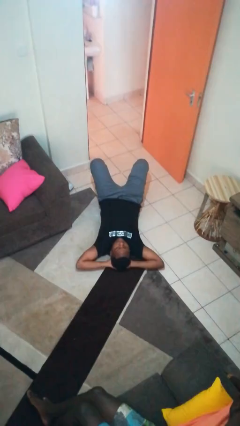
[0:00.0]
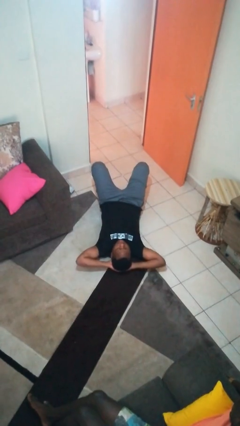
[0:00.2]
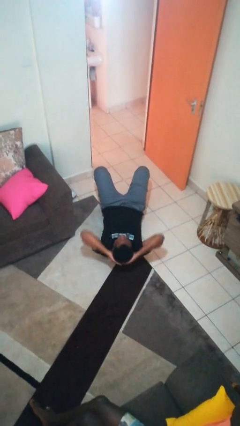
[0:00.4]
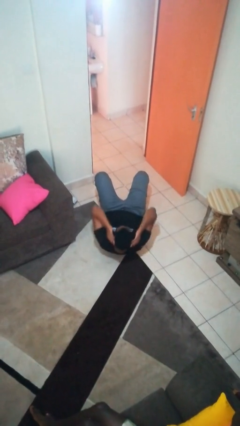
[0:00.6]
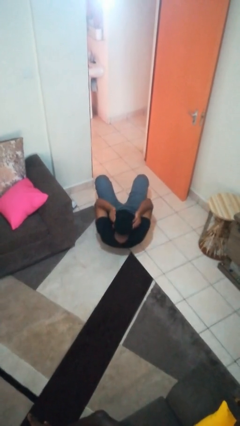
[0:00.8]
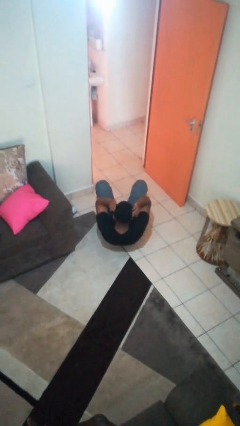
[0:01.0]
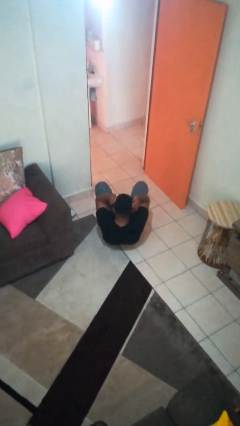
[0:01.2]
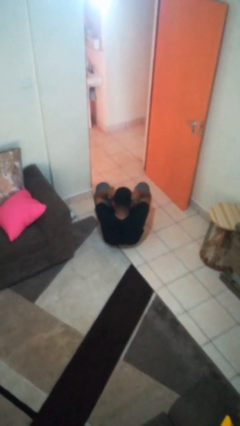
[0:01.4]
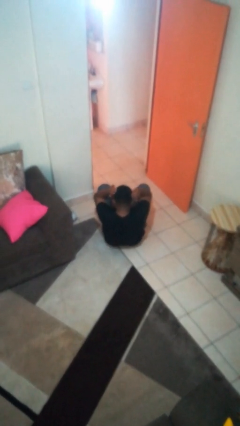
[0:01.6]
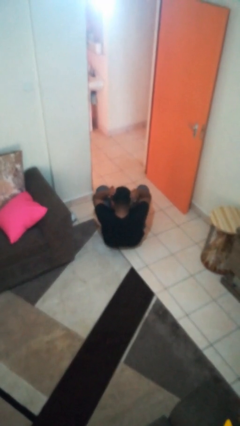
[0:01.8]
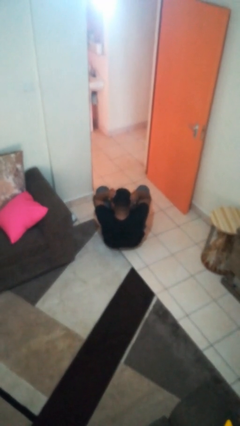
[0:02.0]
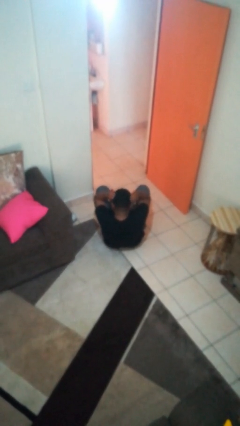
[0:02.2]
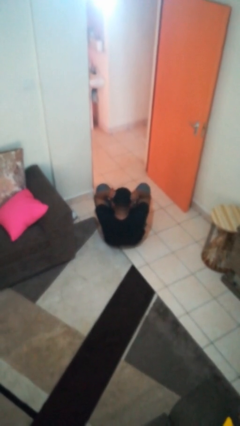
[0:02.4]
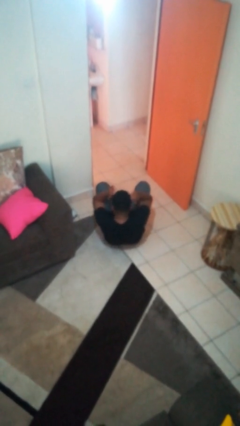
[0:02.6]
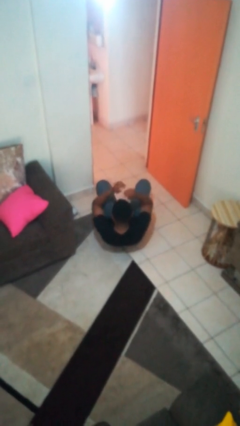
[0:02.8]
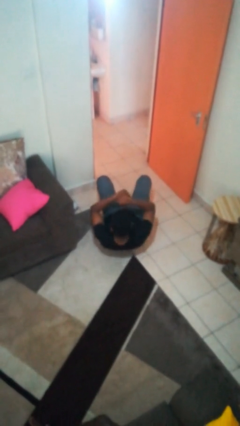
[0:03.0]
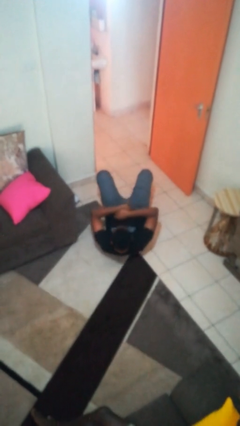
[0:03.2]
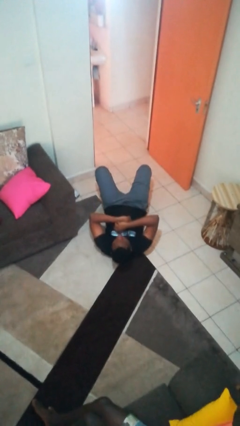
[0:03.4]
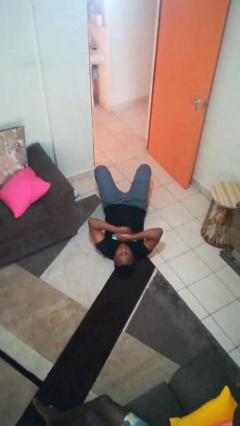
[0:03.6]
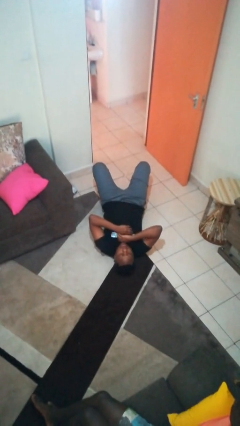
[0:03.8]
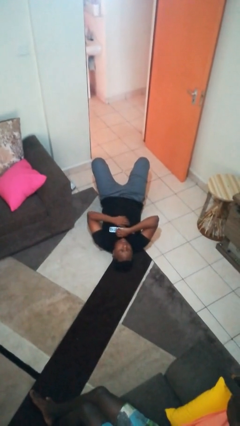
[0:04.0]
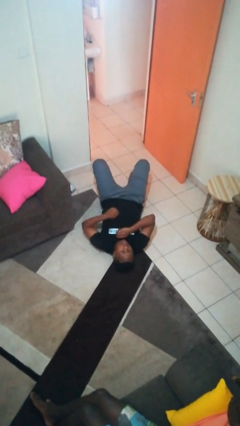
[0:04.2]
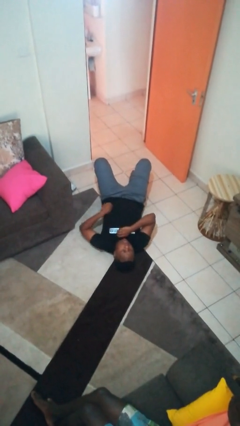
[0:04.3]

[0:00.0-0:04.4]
person exercises with situp

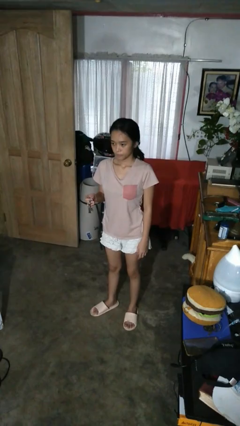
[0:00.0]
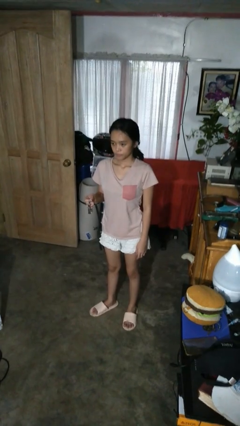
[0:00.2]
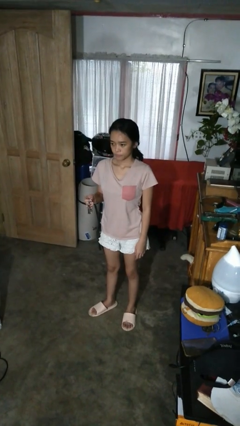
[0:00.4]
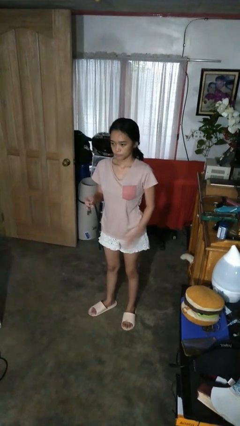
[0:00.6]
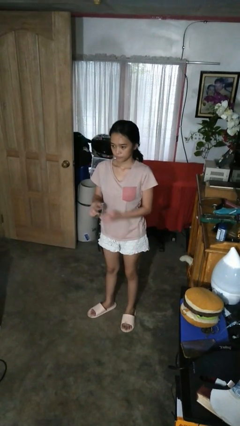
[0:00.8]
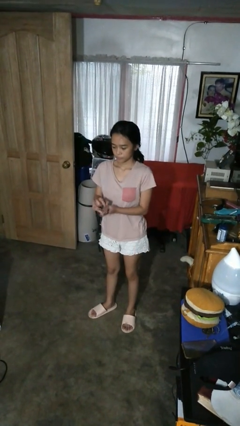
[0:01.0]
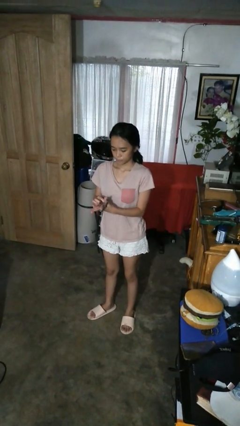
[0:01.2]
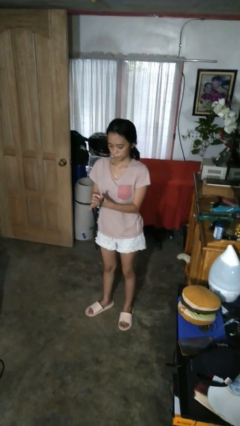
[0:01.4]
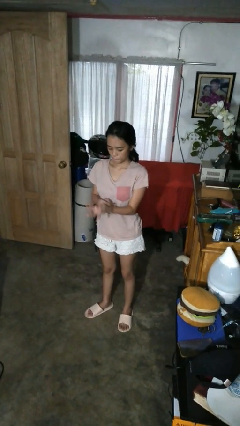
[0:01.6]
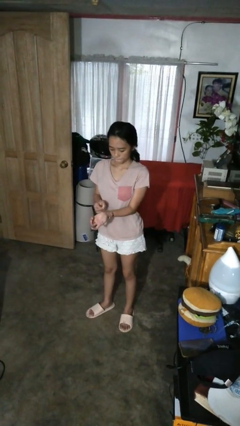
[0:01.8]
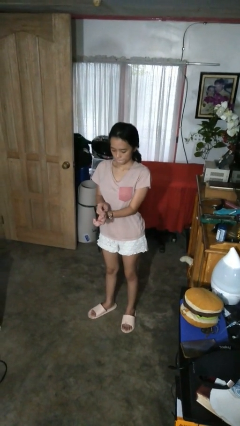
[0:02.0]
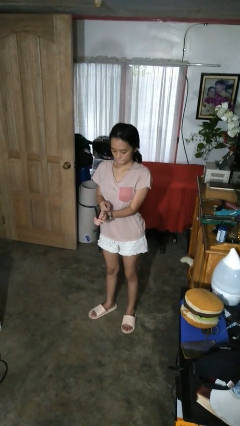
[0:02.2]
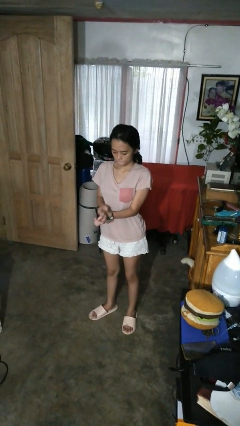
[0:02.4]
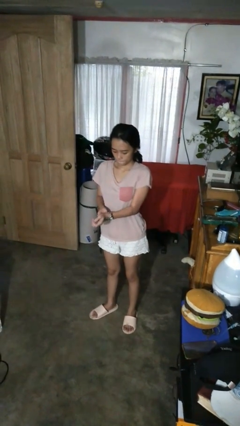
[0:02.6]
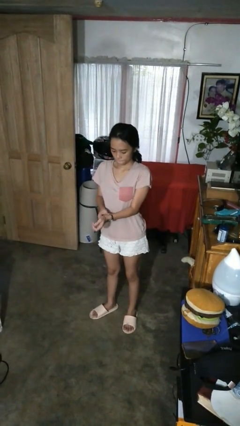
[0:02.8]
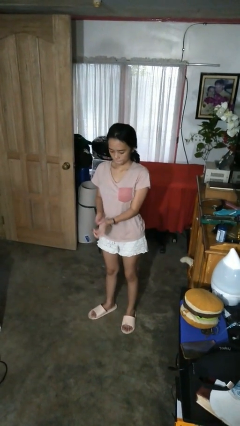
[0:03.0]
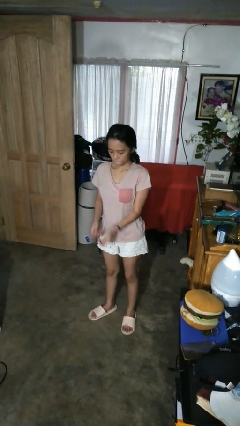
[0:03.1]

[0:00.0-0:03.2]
person puts on wristwatch

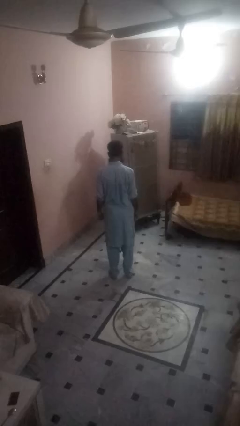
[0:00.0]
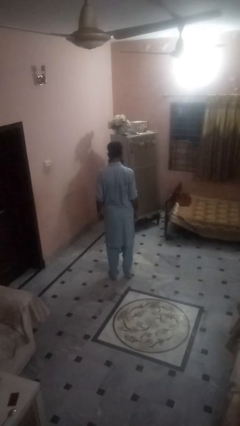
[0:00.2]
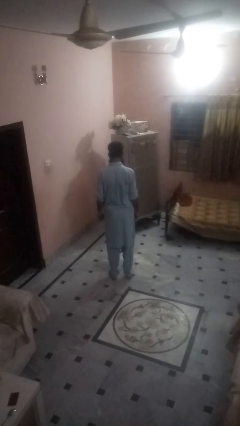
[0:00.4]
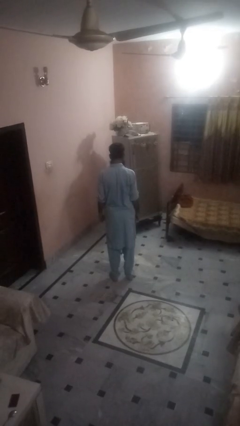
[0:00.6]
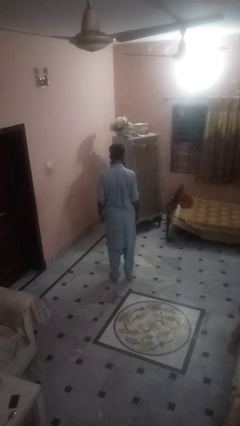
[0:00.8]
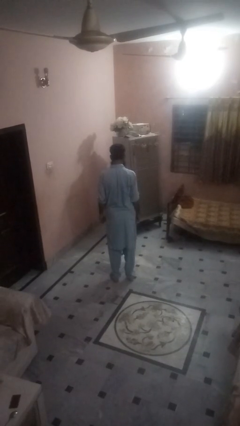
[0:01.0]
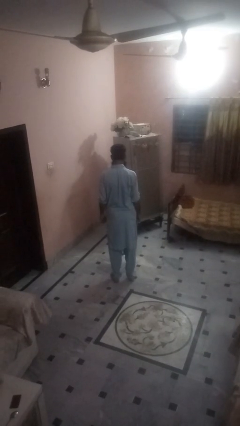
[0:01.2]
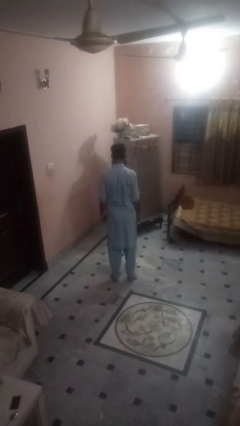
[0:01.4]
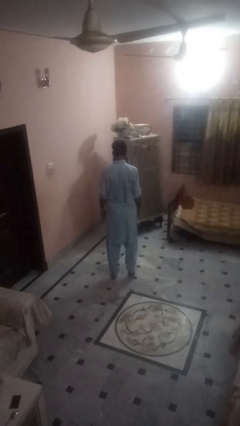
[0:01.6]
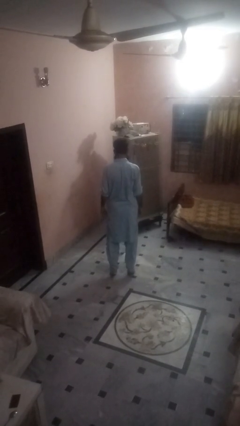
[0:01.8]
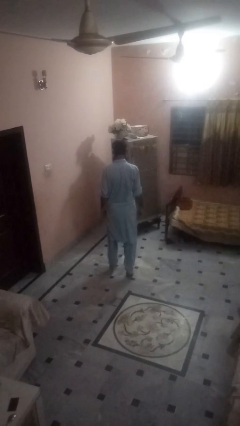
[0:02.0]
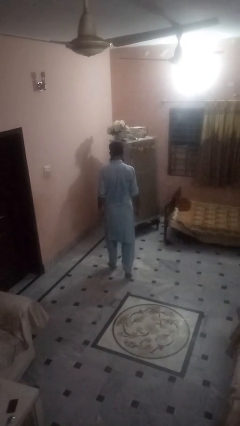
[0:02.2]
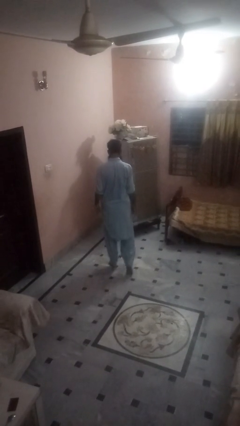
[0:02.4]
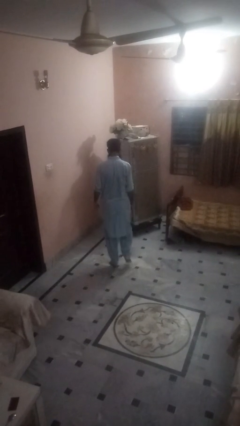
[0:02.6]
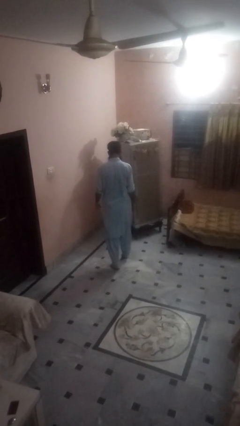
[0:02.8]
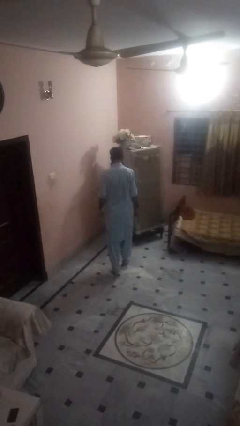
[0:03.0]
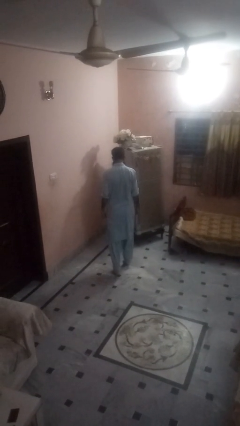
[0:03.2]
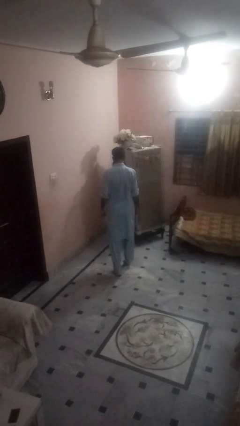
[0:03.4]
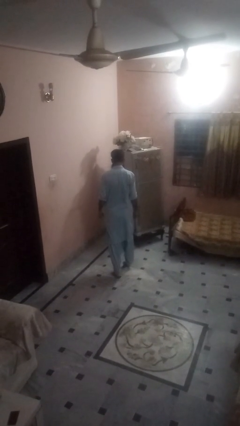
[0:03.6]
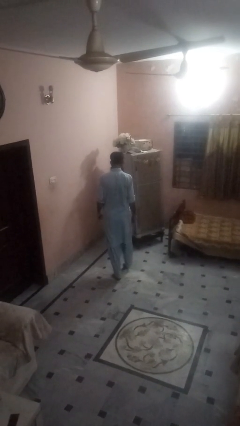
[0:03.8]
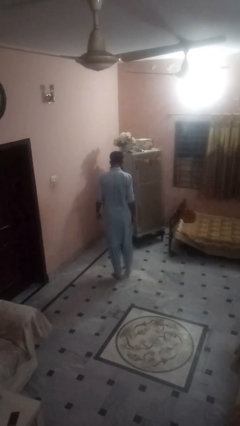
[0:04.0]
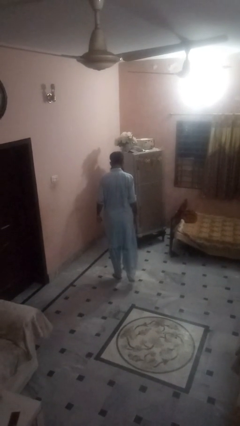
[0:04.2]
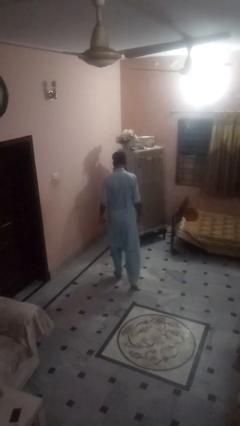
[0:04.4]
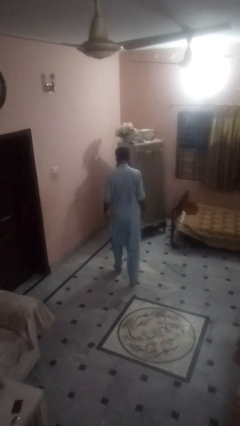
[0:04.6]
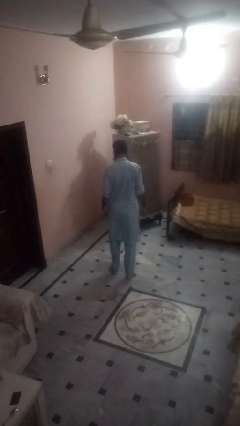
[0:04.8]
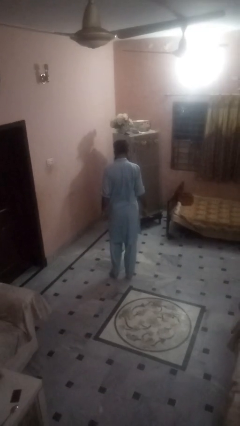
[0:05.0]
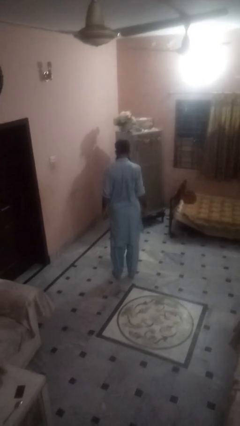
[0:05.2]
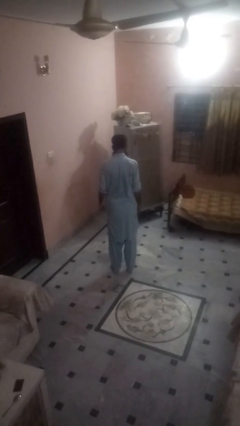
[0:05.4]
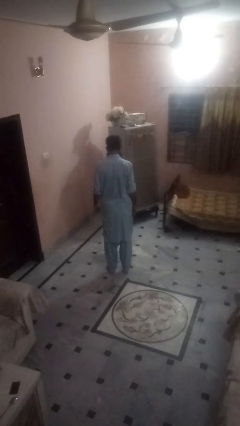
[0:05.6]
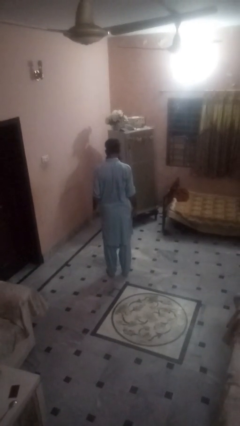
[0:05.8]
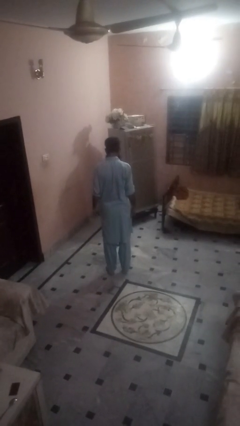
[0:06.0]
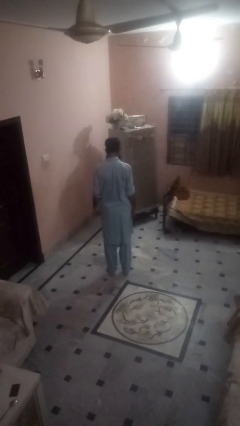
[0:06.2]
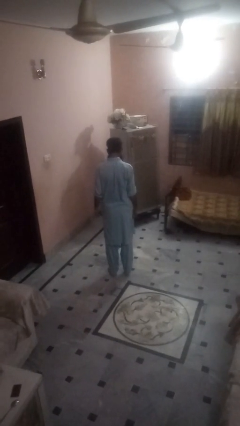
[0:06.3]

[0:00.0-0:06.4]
person walks tiptoe

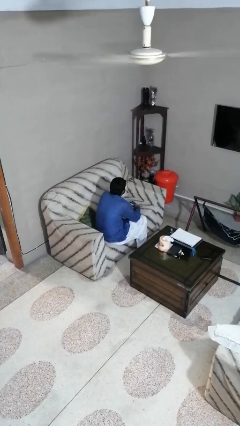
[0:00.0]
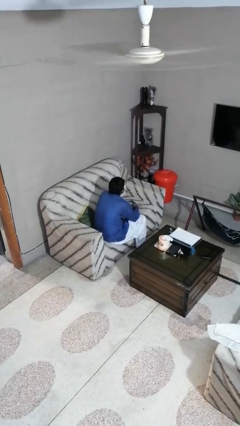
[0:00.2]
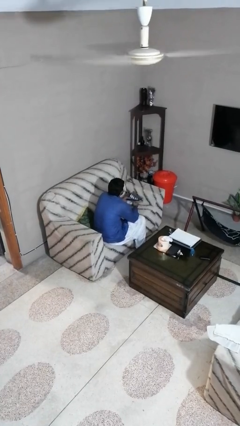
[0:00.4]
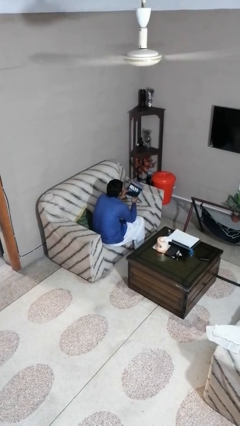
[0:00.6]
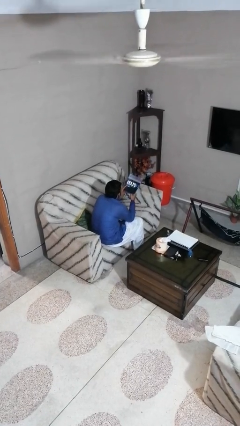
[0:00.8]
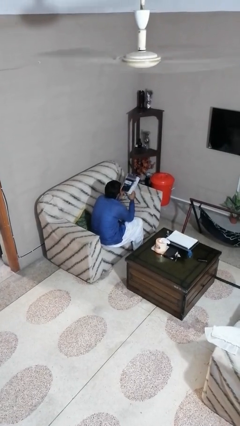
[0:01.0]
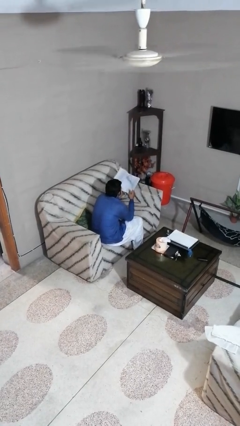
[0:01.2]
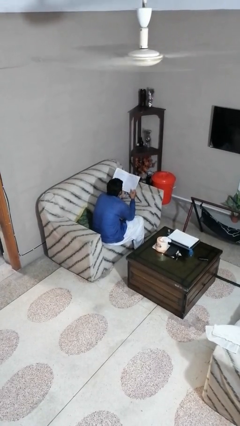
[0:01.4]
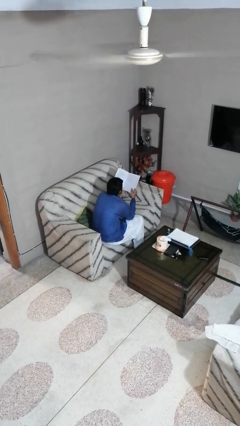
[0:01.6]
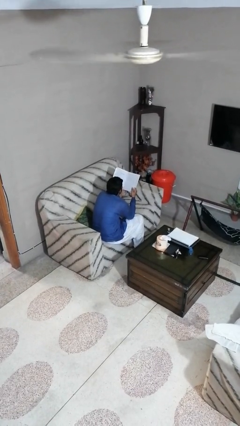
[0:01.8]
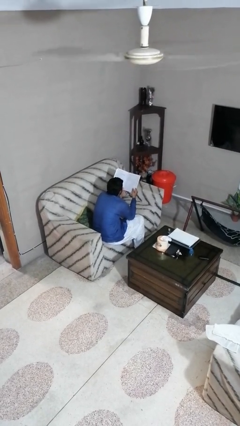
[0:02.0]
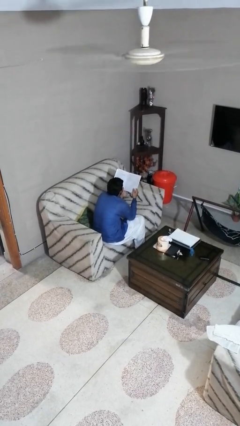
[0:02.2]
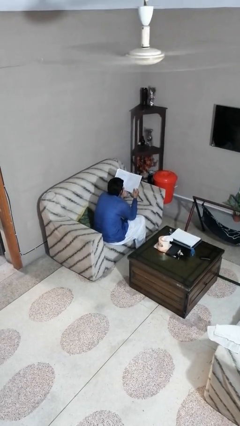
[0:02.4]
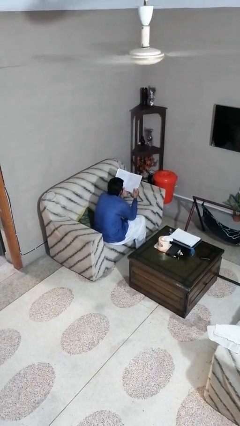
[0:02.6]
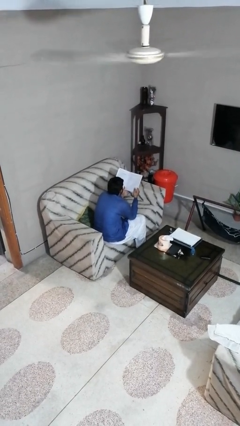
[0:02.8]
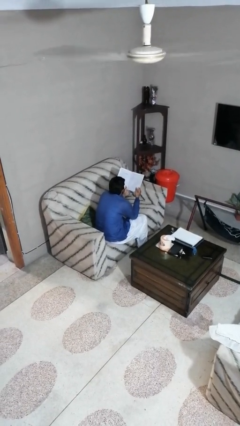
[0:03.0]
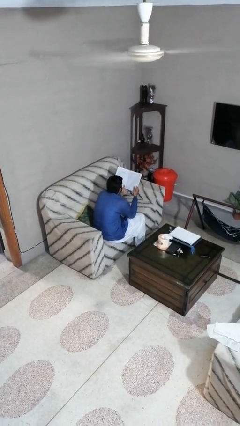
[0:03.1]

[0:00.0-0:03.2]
person reads book

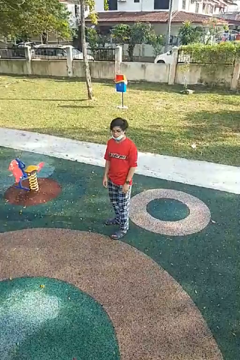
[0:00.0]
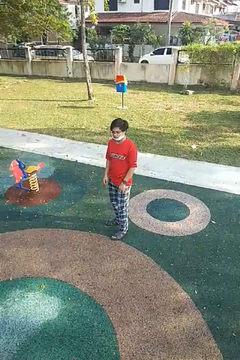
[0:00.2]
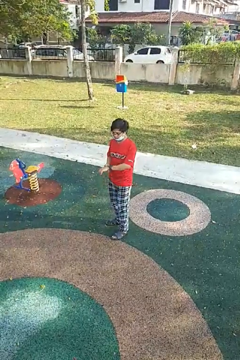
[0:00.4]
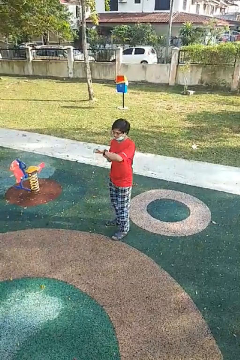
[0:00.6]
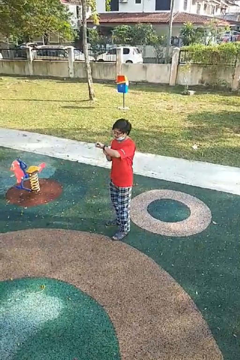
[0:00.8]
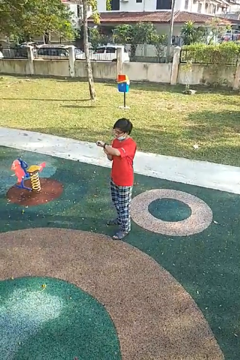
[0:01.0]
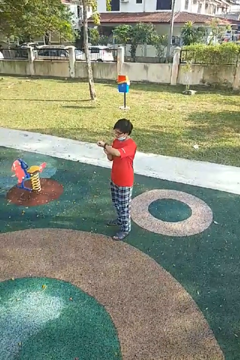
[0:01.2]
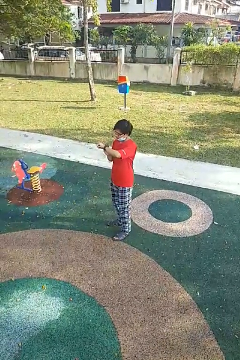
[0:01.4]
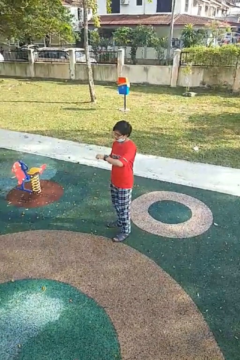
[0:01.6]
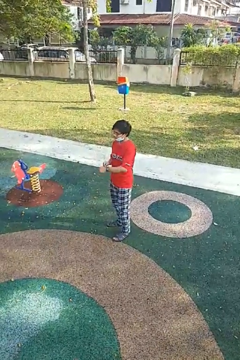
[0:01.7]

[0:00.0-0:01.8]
person looks at wristwatch
